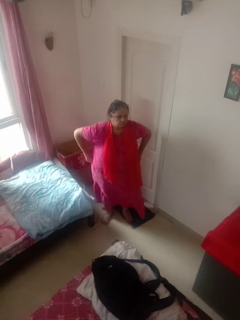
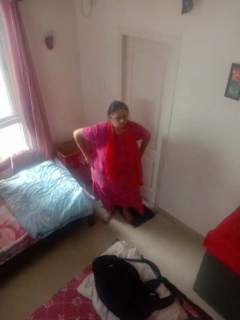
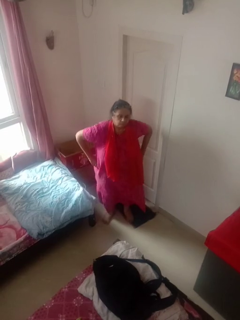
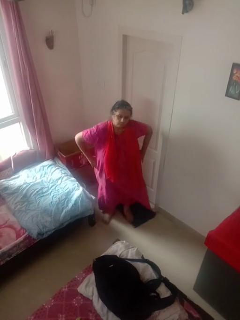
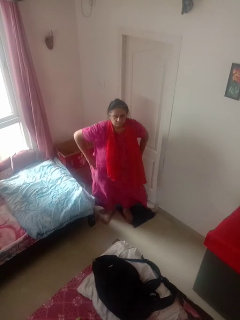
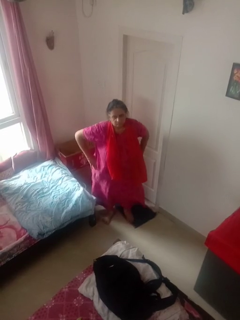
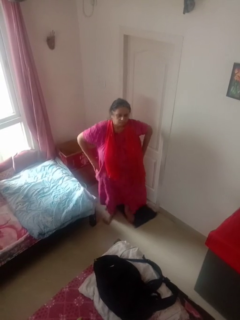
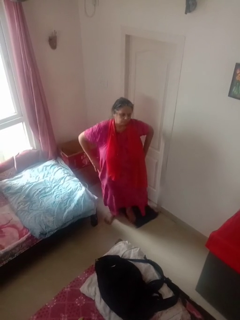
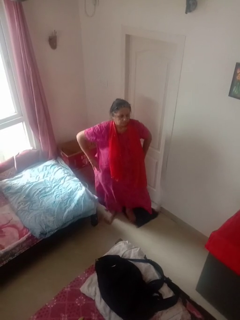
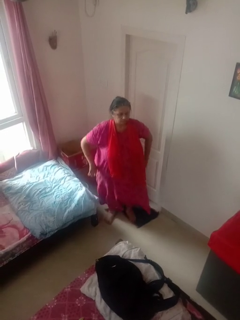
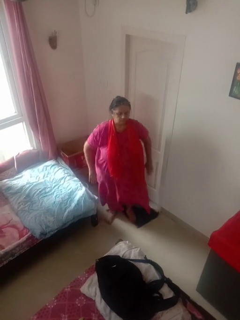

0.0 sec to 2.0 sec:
person wiggles hips

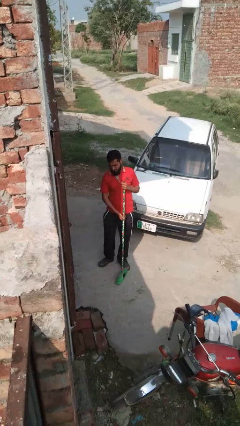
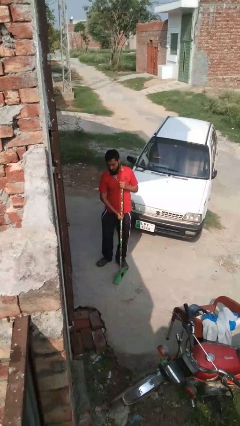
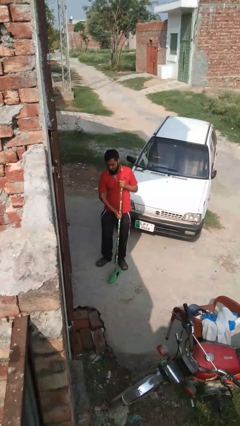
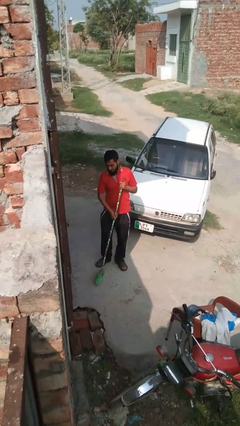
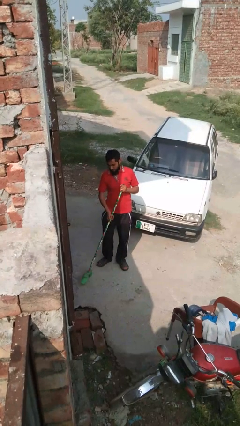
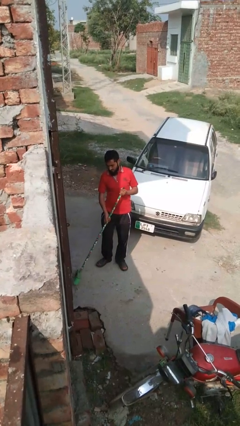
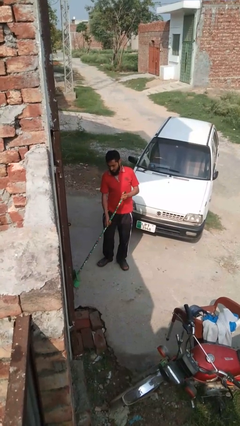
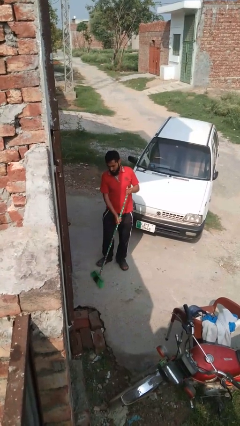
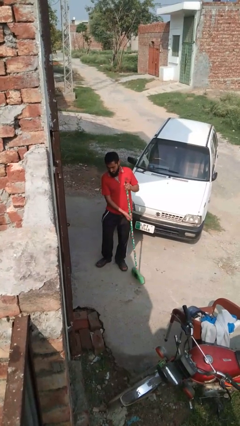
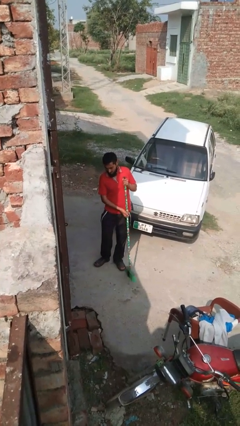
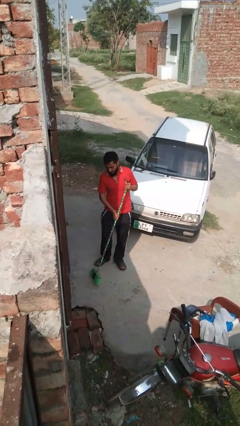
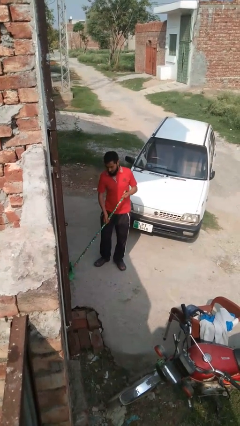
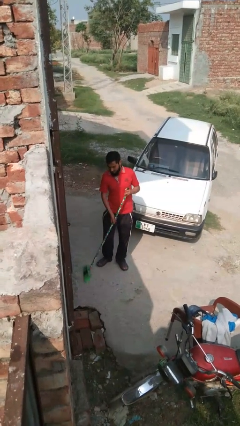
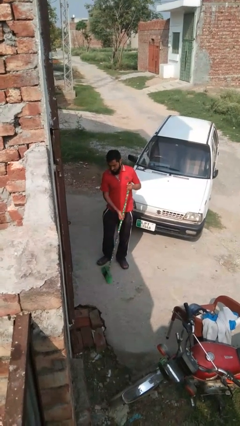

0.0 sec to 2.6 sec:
person sweeps floor

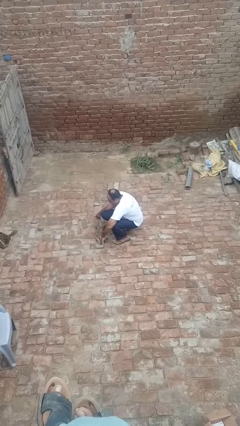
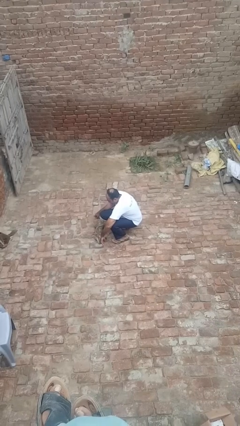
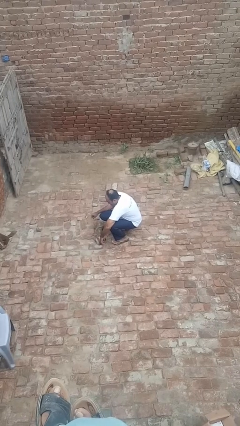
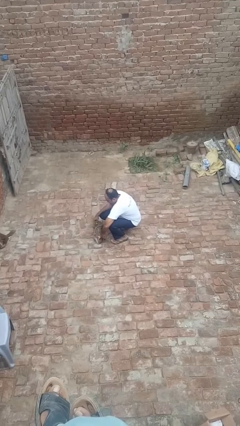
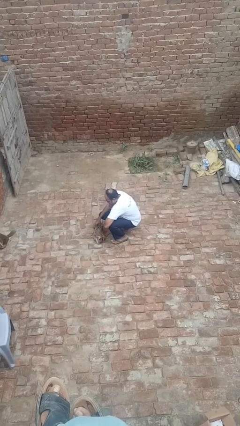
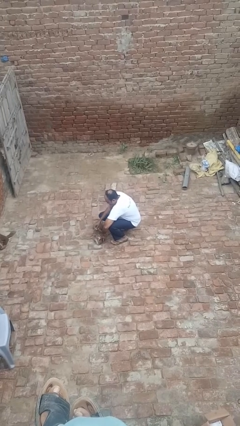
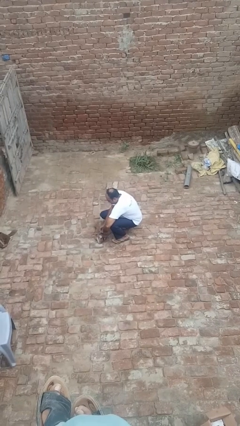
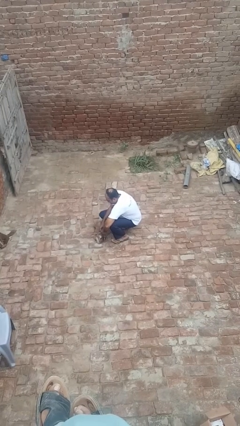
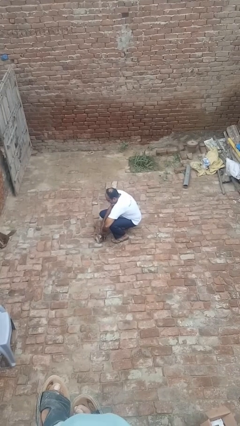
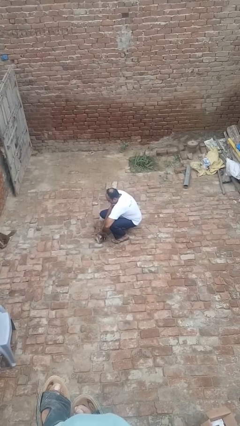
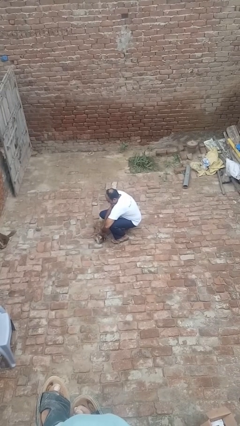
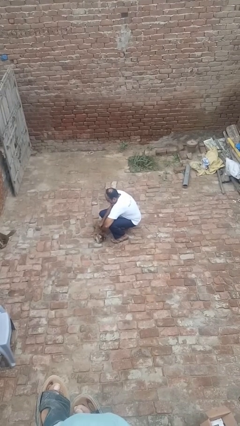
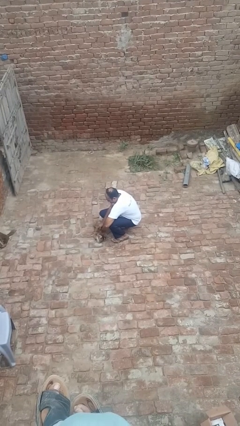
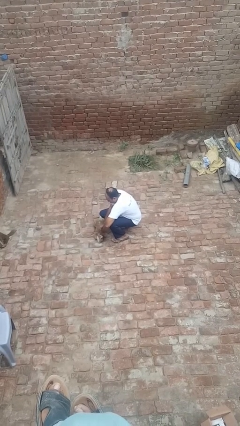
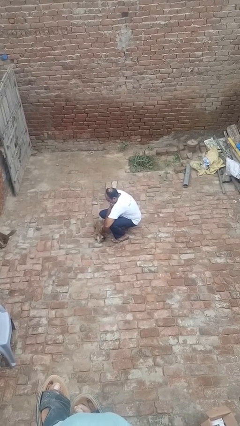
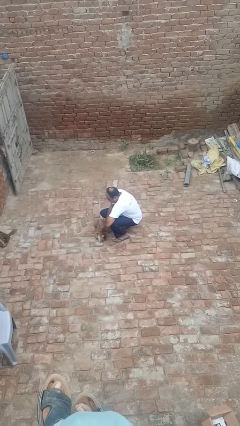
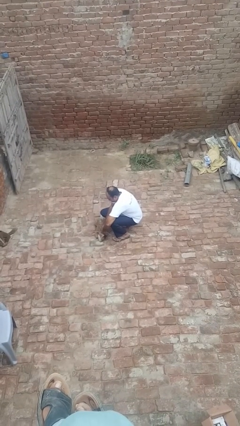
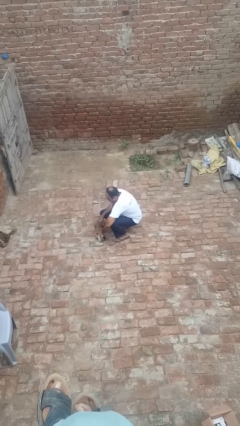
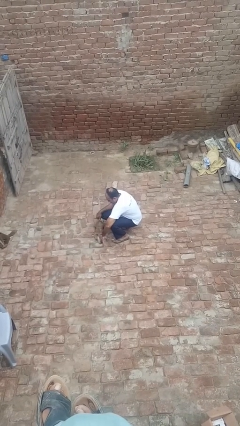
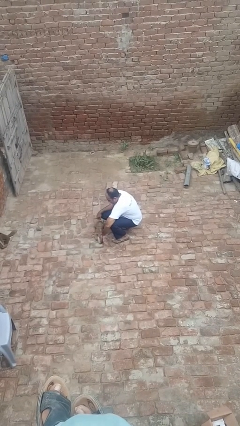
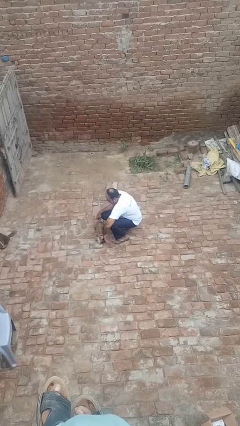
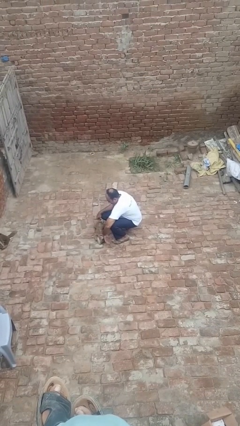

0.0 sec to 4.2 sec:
person attaches leash to dog

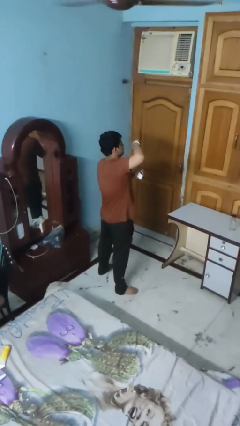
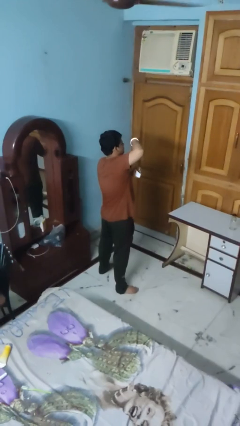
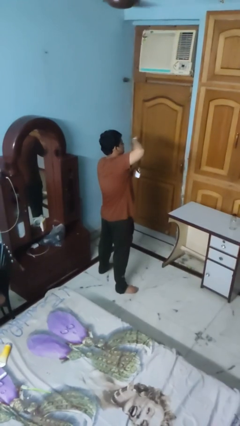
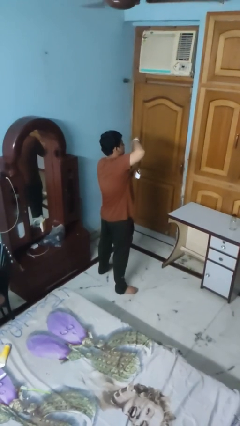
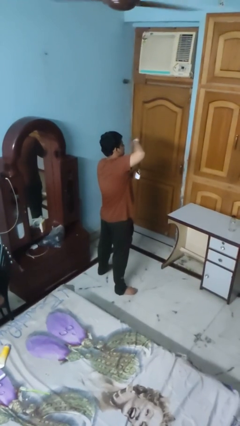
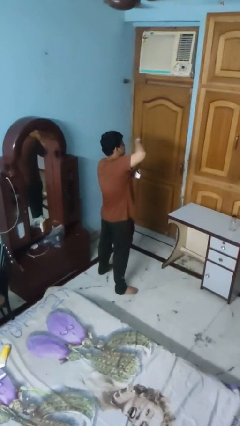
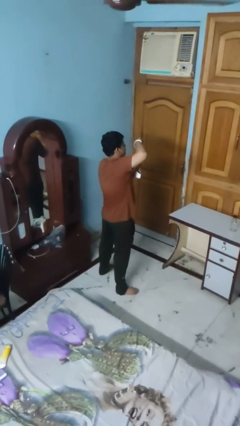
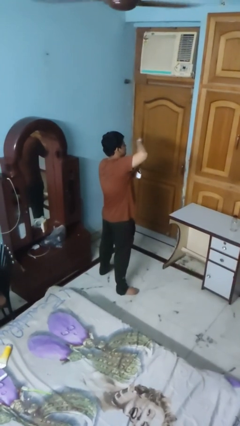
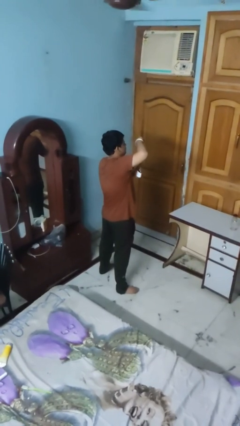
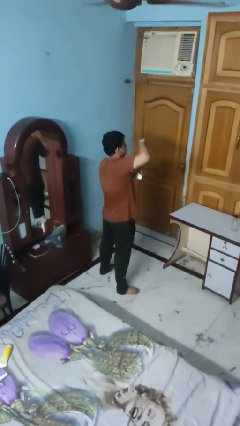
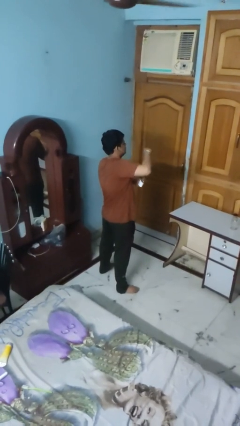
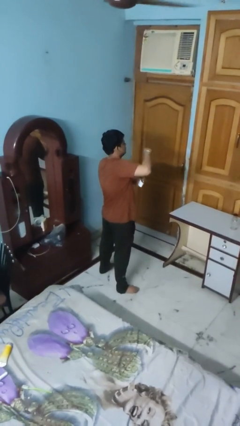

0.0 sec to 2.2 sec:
person applies deodorant

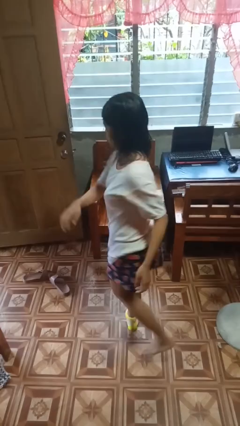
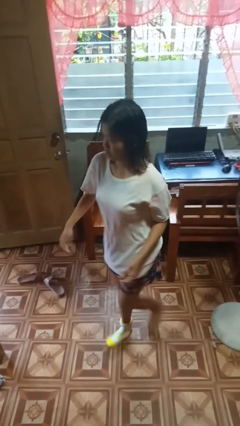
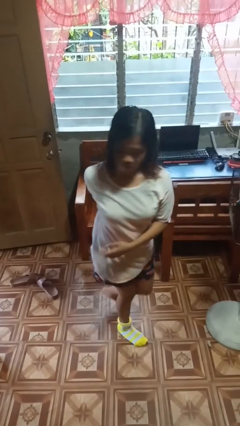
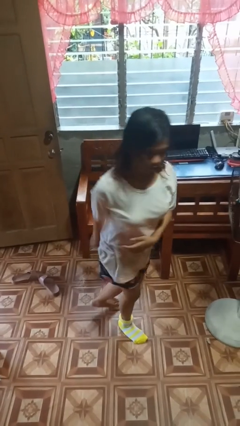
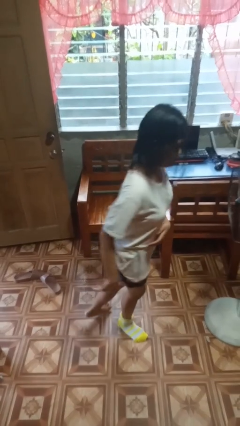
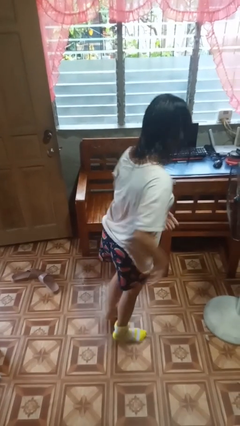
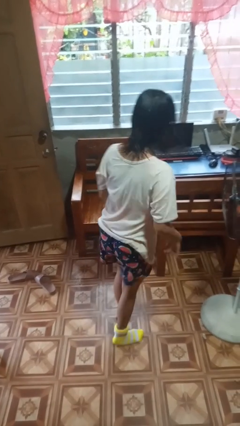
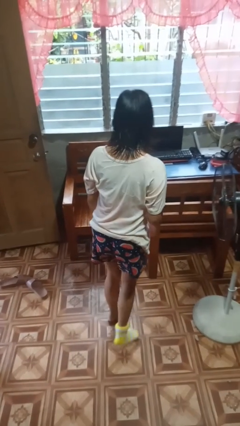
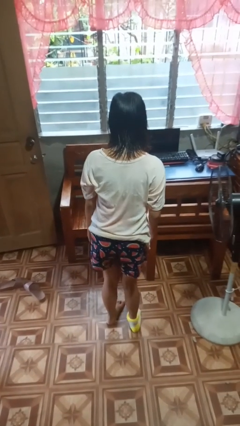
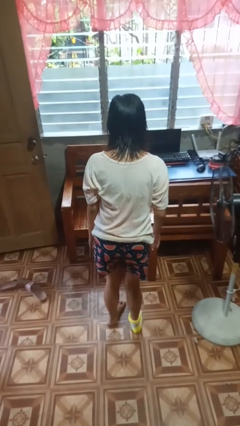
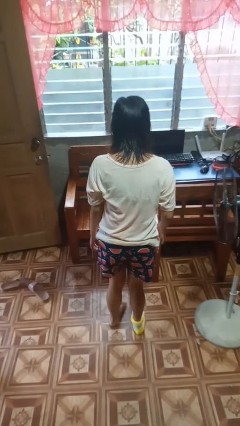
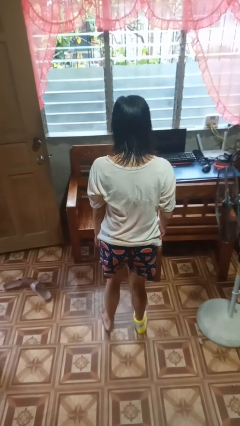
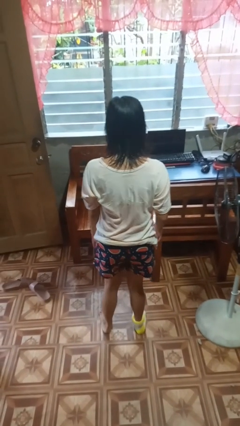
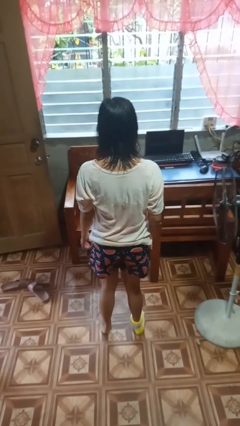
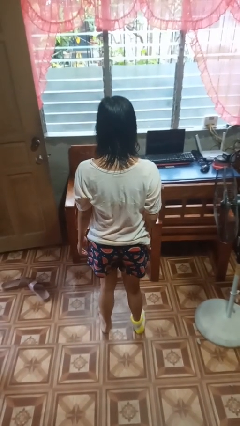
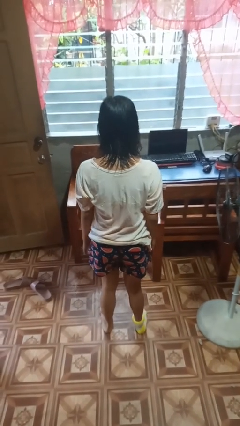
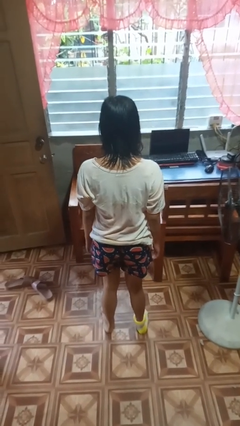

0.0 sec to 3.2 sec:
person twirls

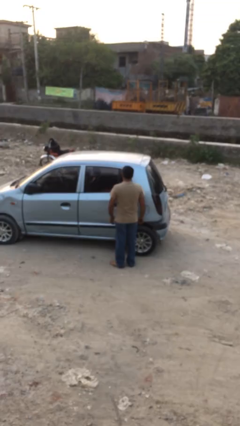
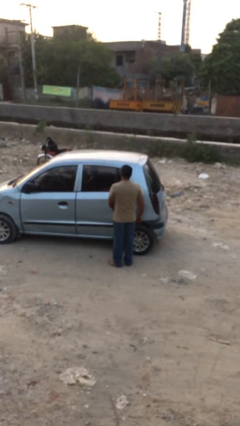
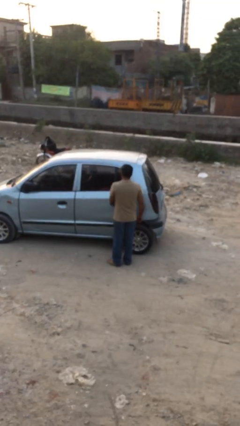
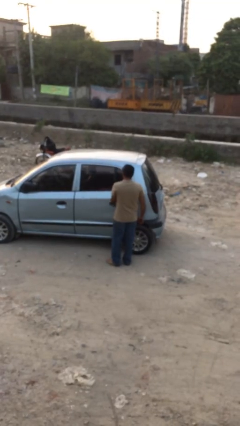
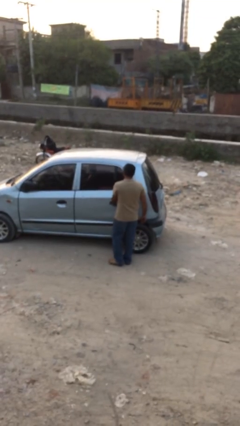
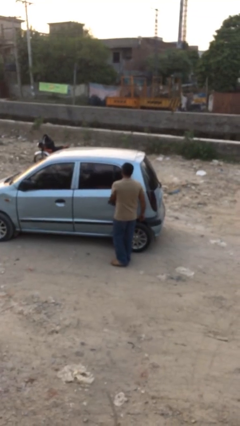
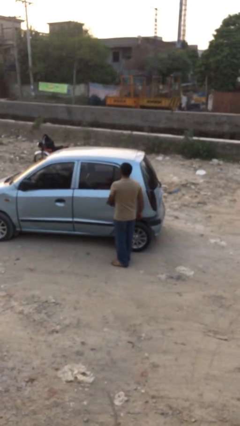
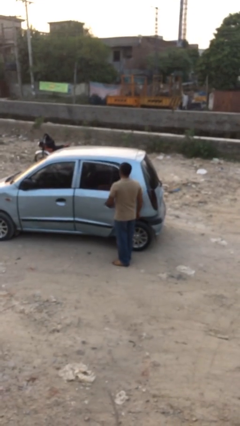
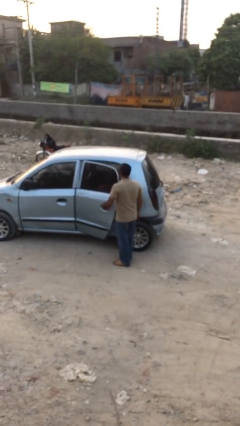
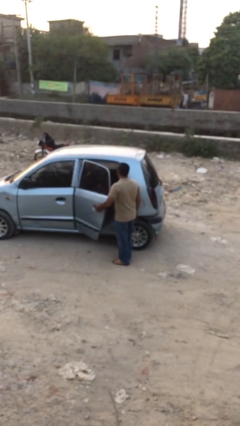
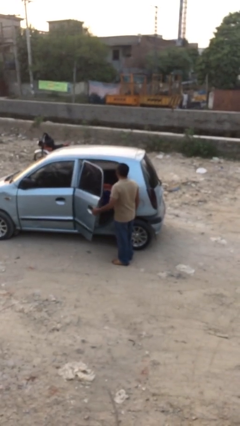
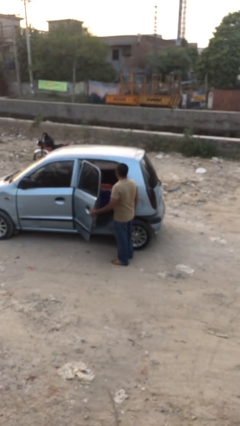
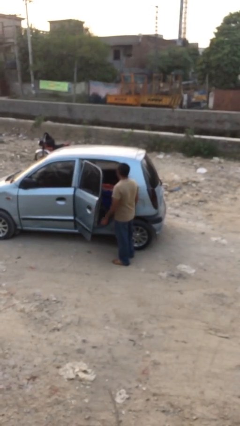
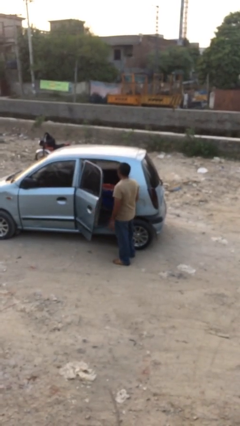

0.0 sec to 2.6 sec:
person opens car door

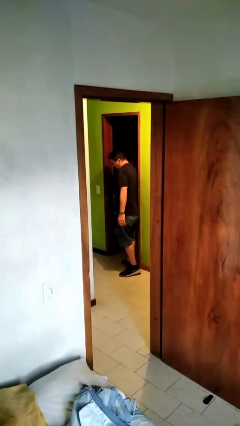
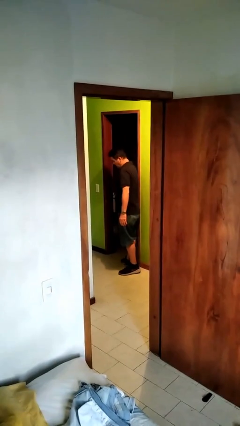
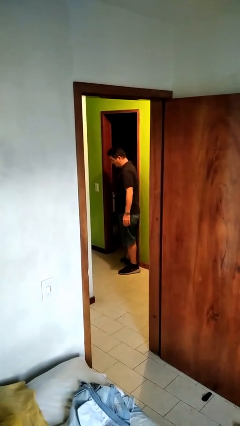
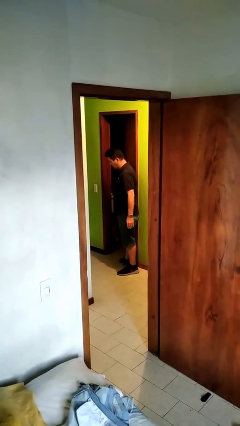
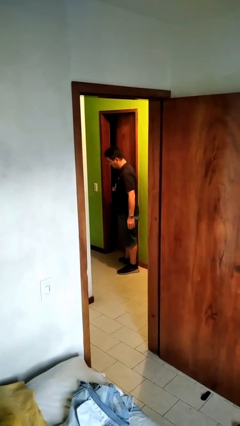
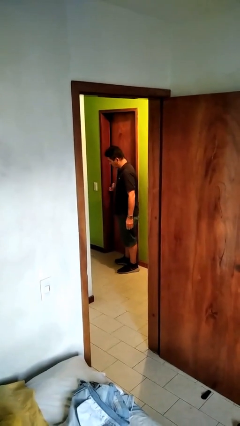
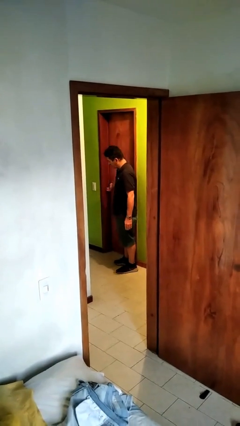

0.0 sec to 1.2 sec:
person closes facility door
